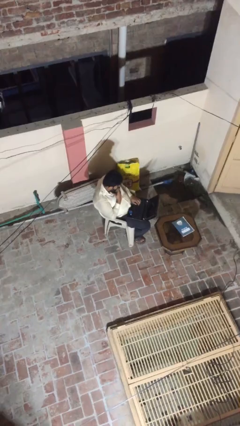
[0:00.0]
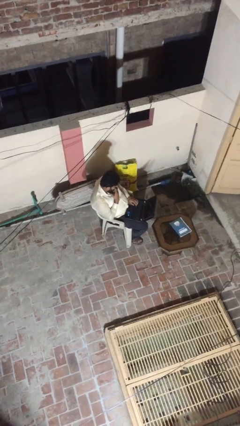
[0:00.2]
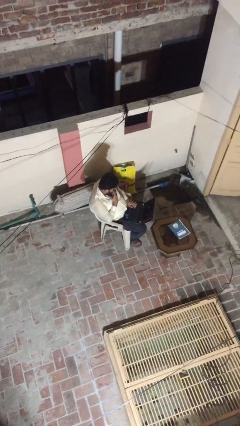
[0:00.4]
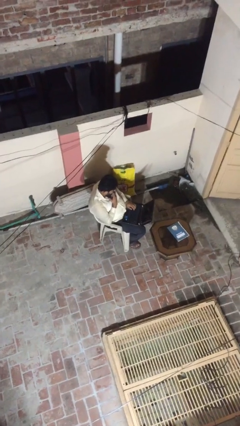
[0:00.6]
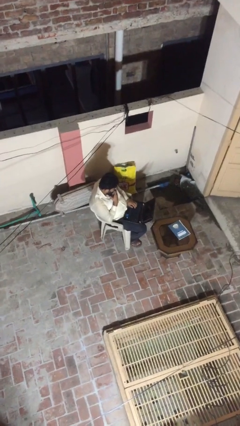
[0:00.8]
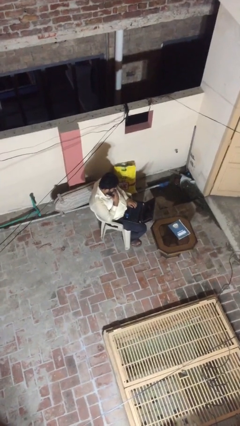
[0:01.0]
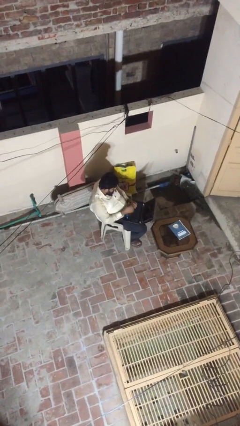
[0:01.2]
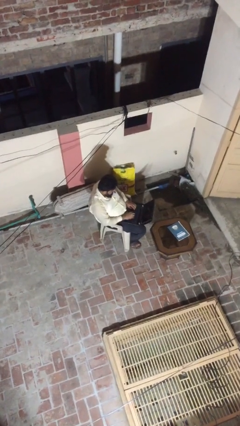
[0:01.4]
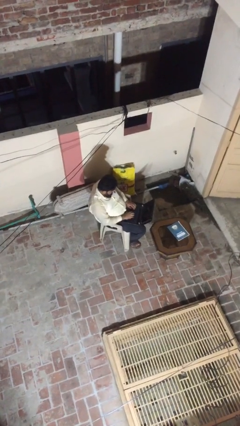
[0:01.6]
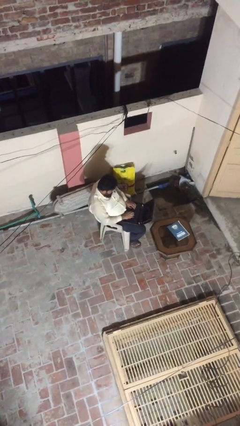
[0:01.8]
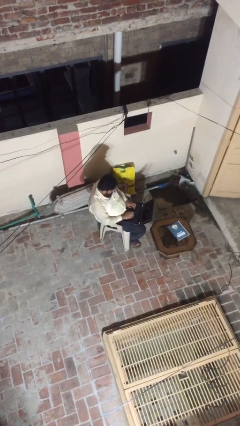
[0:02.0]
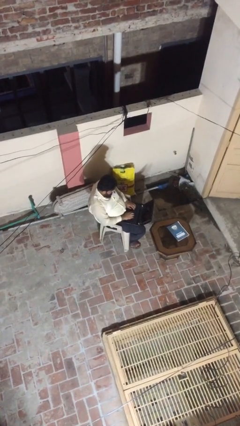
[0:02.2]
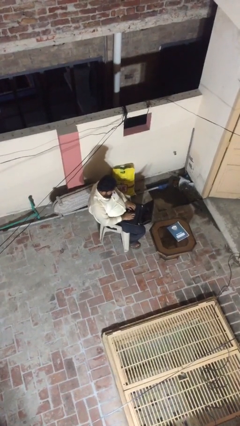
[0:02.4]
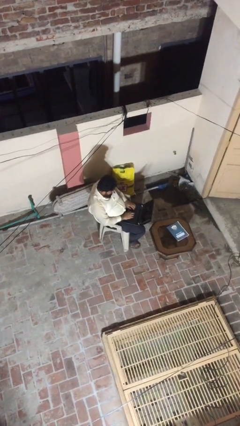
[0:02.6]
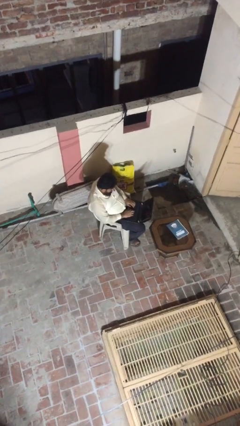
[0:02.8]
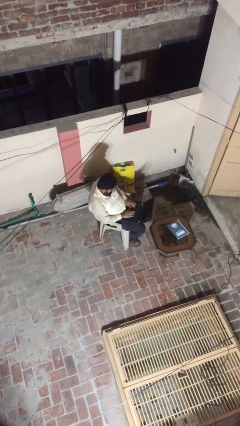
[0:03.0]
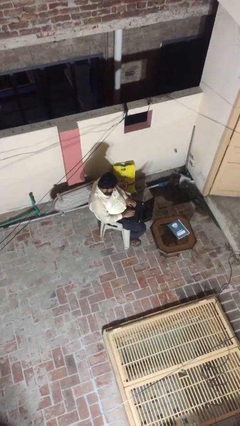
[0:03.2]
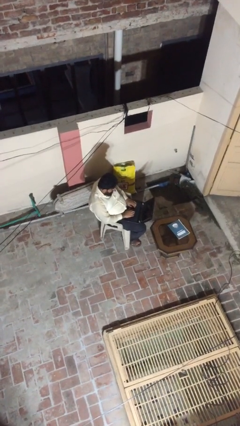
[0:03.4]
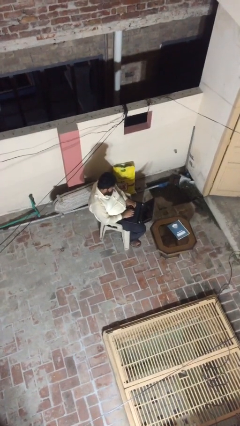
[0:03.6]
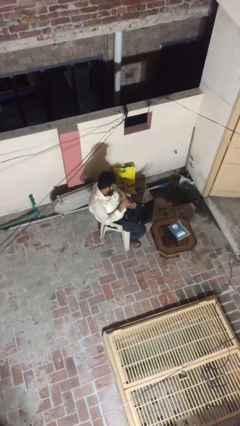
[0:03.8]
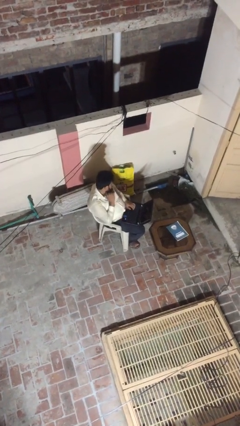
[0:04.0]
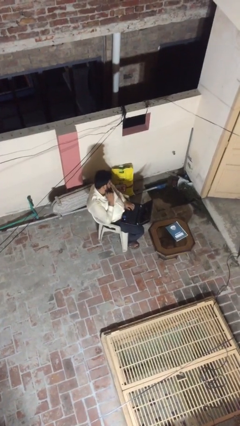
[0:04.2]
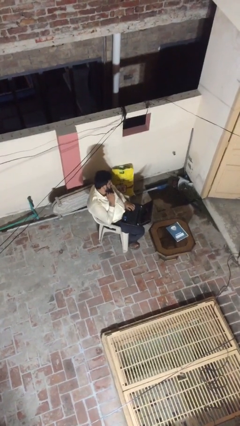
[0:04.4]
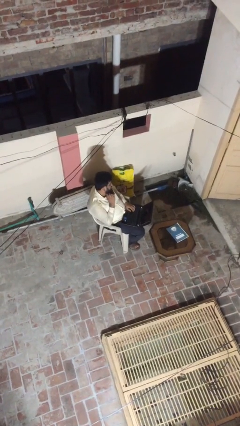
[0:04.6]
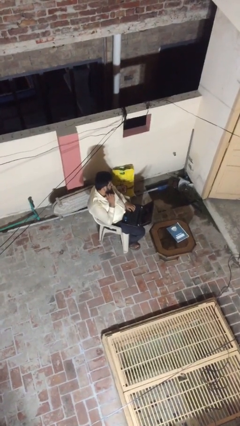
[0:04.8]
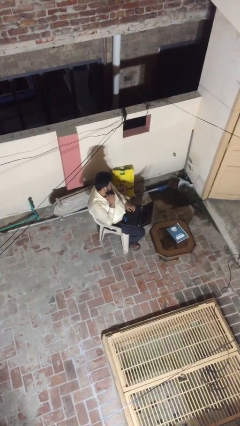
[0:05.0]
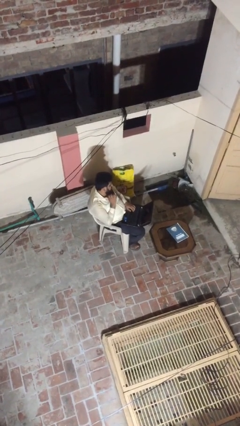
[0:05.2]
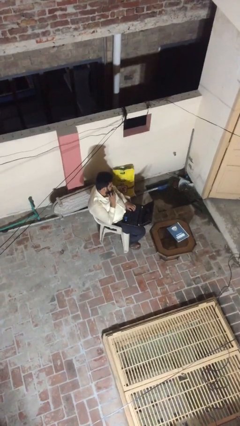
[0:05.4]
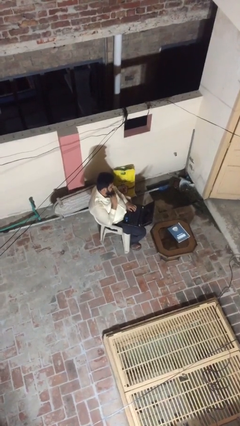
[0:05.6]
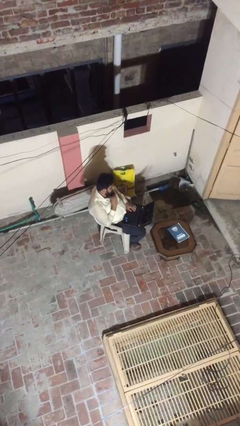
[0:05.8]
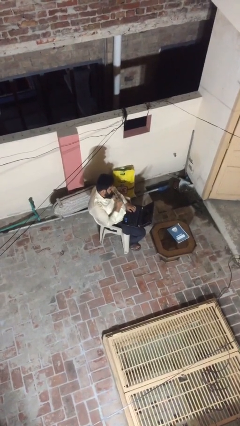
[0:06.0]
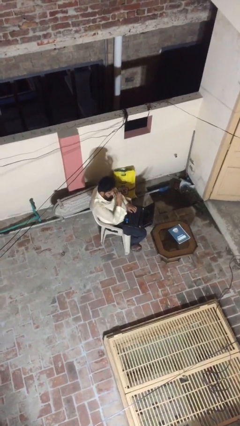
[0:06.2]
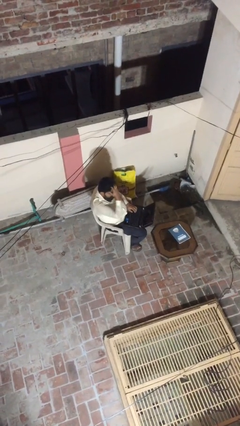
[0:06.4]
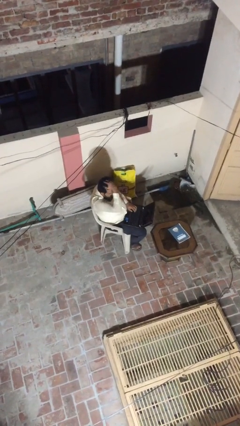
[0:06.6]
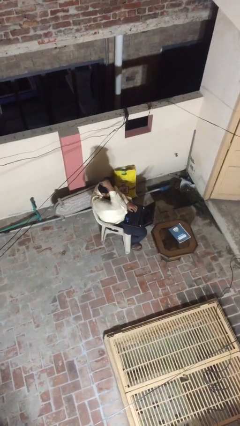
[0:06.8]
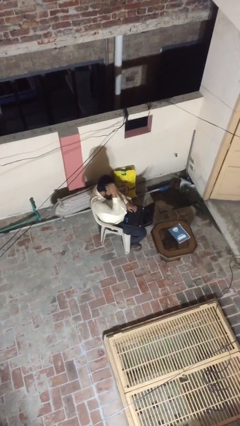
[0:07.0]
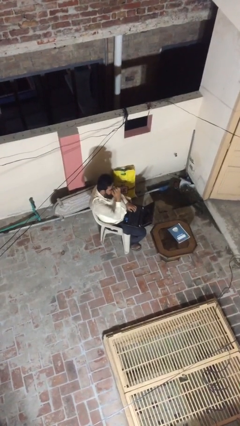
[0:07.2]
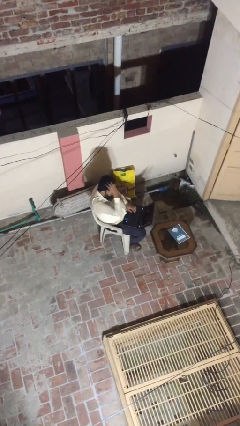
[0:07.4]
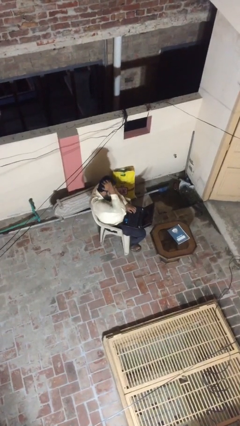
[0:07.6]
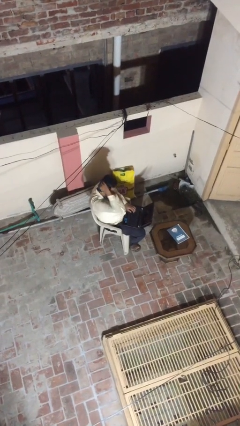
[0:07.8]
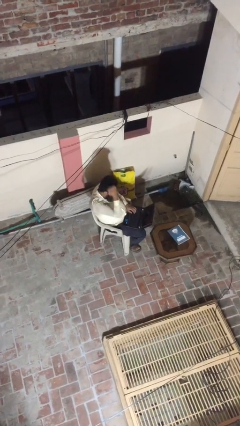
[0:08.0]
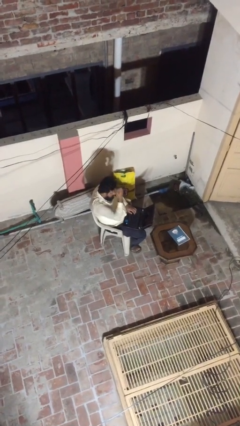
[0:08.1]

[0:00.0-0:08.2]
person interacts with laptop

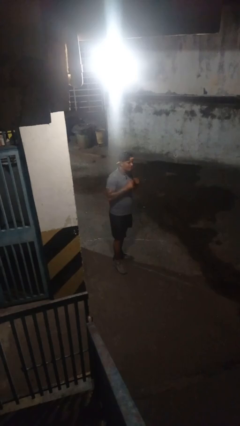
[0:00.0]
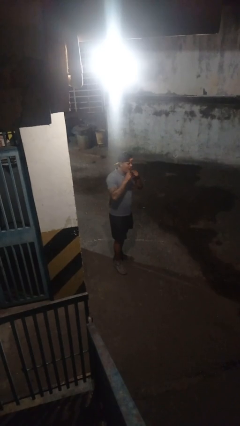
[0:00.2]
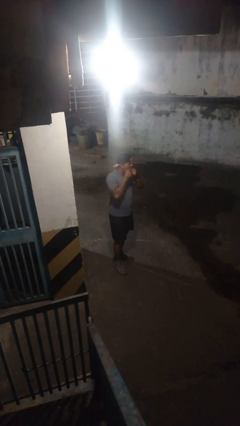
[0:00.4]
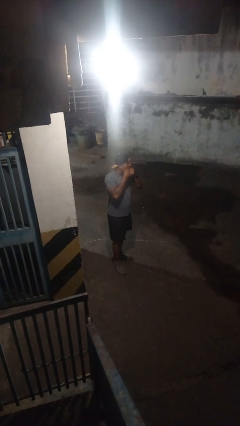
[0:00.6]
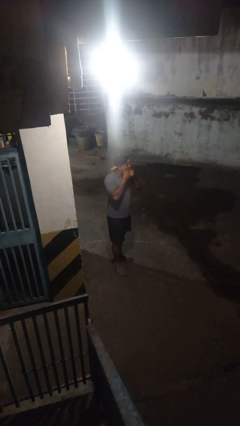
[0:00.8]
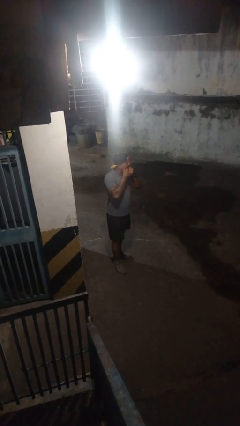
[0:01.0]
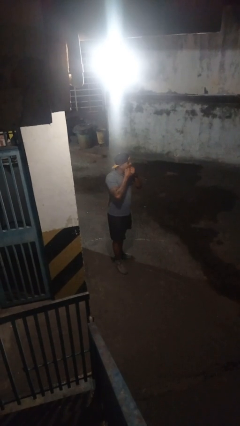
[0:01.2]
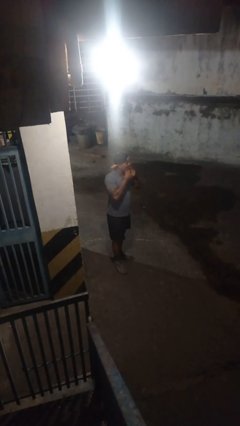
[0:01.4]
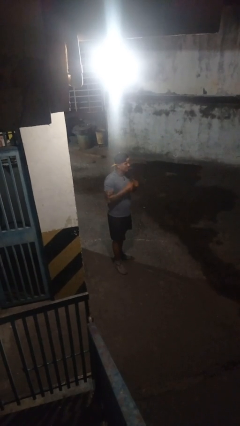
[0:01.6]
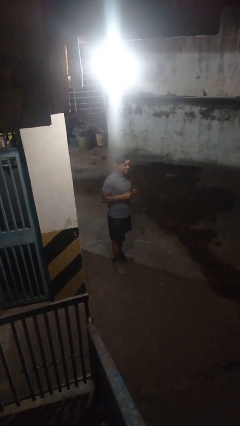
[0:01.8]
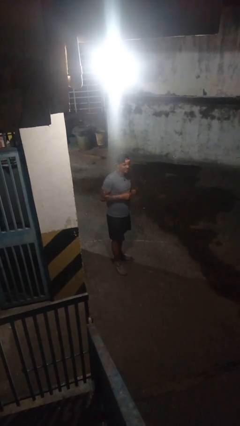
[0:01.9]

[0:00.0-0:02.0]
person flosses

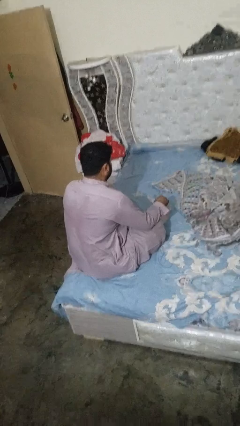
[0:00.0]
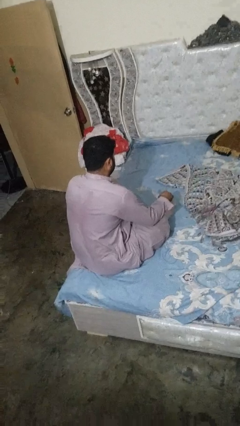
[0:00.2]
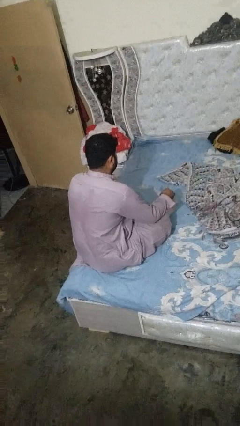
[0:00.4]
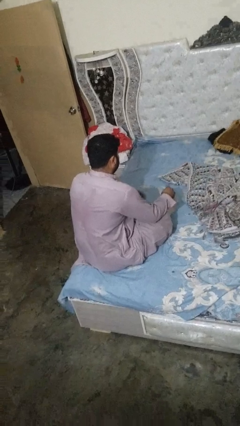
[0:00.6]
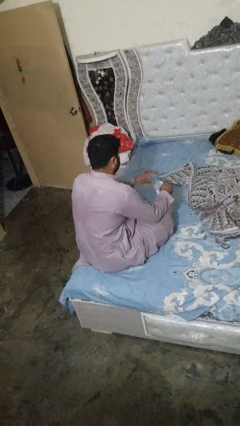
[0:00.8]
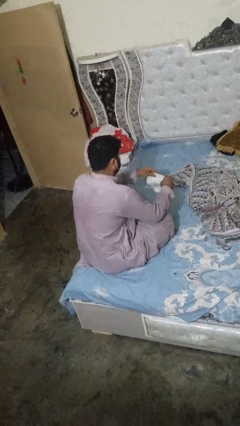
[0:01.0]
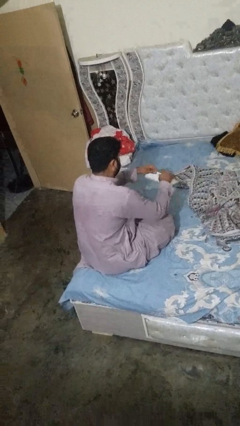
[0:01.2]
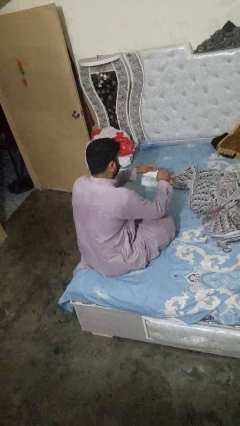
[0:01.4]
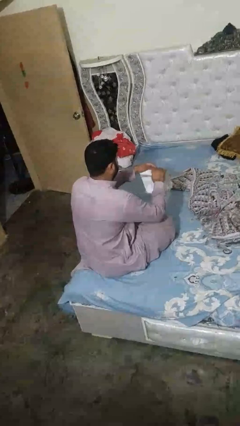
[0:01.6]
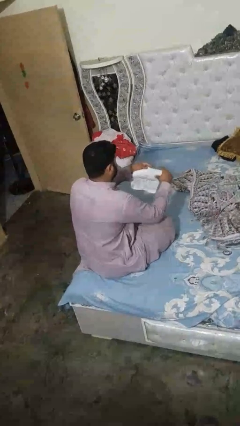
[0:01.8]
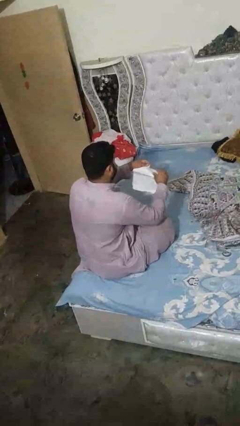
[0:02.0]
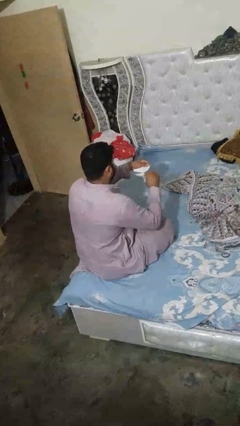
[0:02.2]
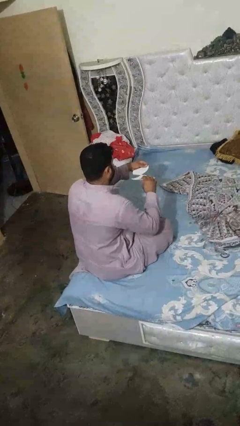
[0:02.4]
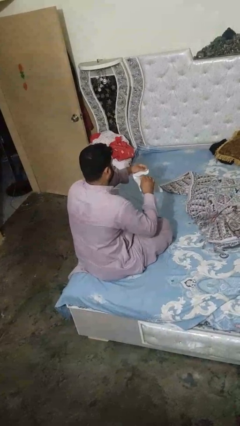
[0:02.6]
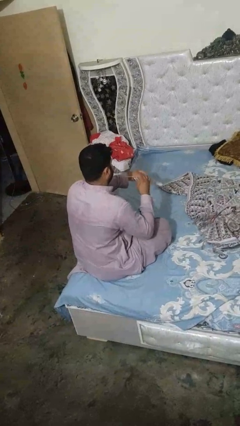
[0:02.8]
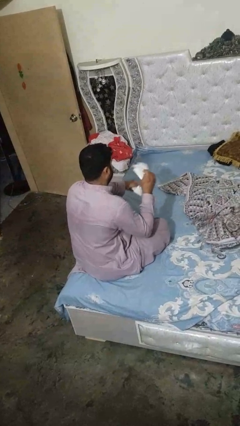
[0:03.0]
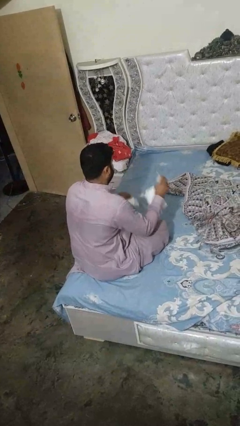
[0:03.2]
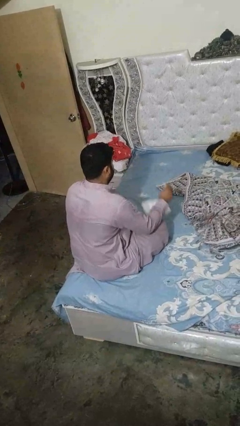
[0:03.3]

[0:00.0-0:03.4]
person tears paper

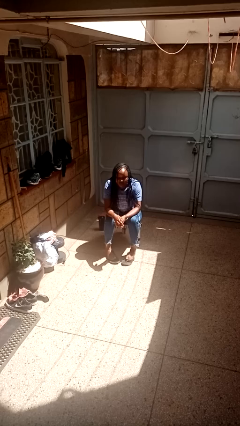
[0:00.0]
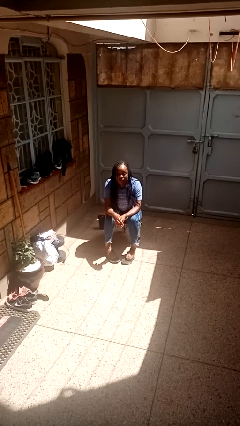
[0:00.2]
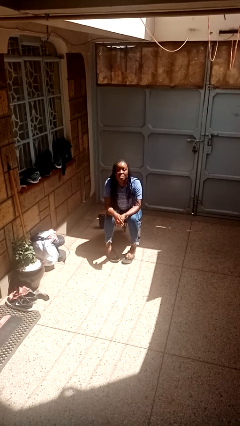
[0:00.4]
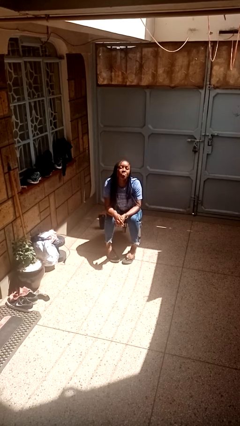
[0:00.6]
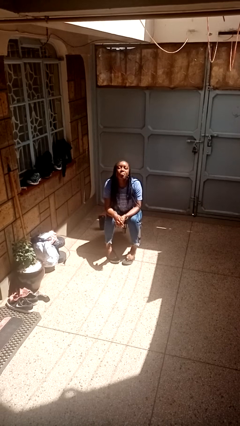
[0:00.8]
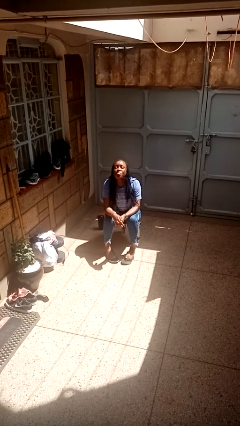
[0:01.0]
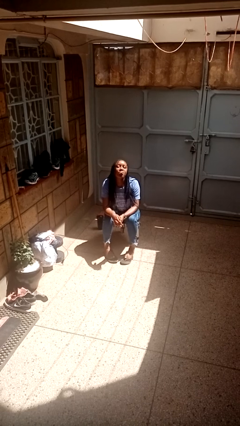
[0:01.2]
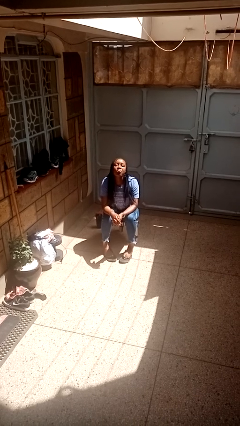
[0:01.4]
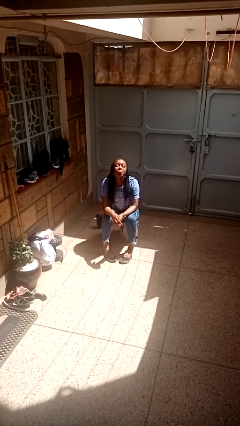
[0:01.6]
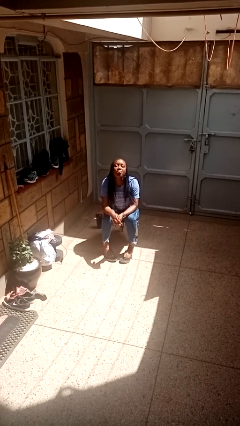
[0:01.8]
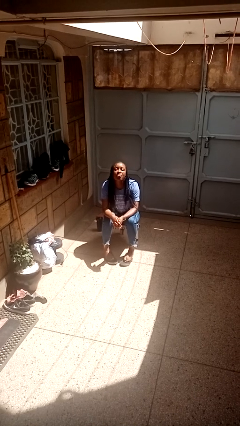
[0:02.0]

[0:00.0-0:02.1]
person sticks out tongue

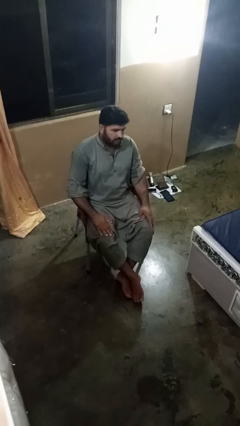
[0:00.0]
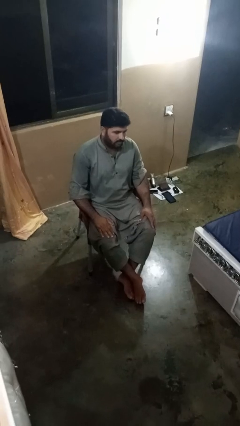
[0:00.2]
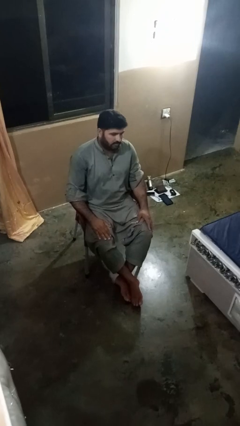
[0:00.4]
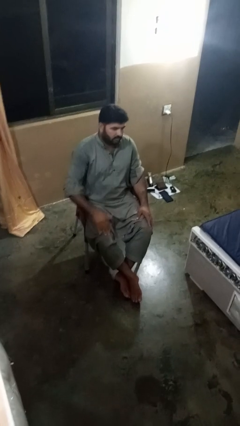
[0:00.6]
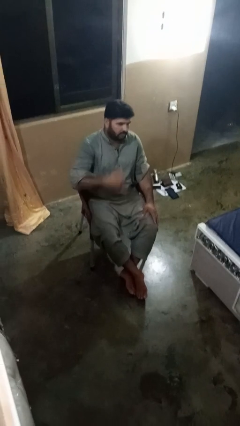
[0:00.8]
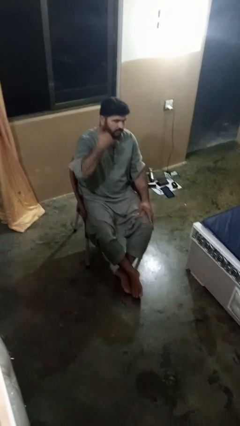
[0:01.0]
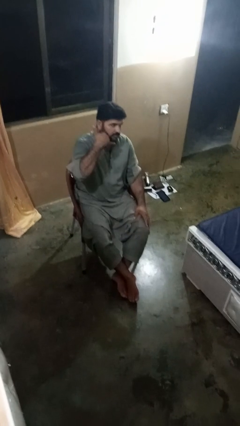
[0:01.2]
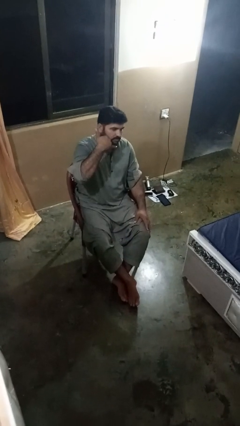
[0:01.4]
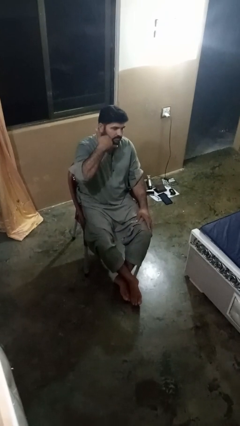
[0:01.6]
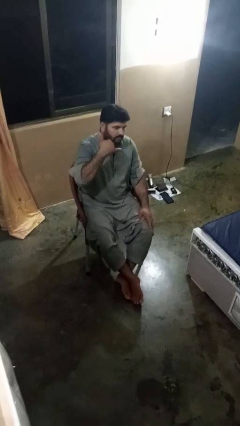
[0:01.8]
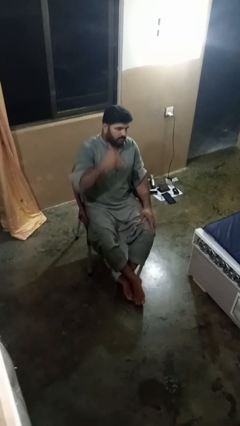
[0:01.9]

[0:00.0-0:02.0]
person gestures call me
